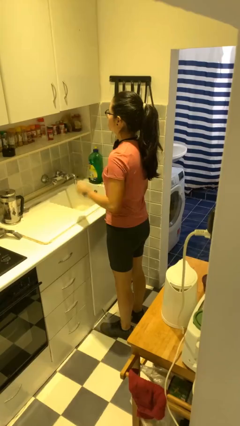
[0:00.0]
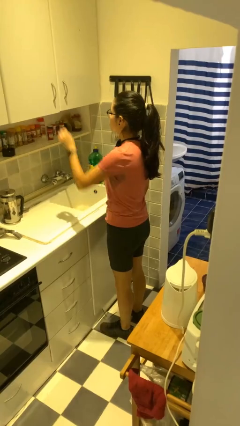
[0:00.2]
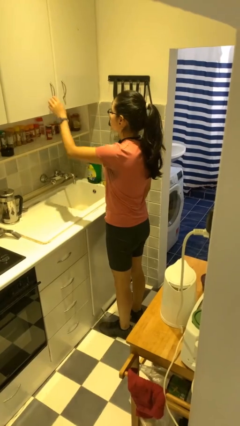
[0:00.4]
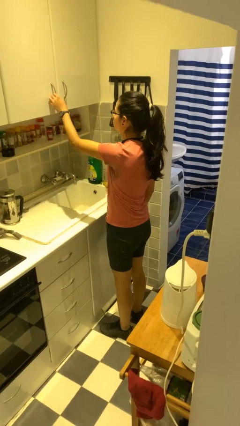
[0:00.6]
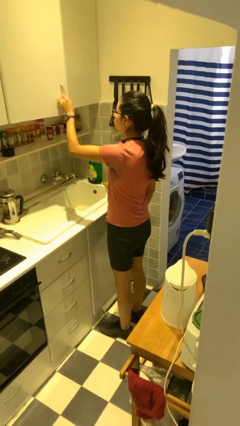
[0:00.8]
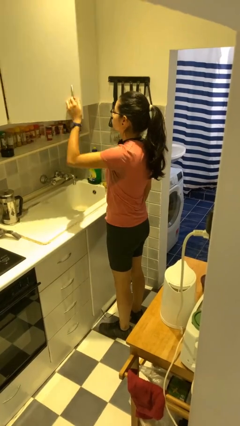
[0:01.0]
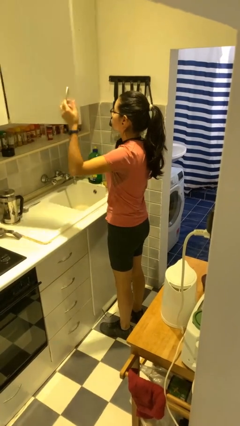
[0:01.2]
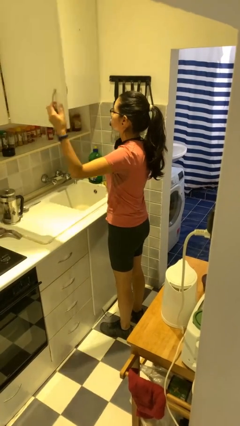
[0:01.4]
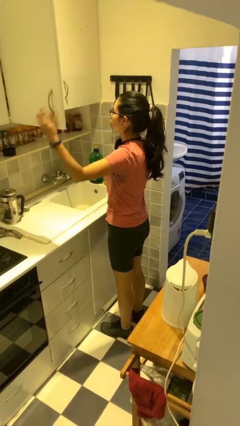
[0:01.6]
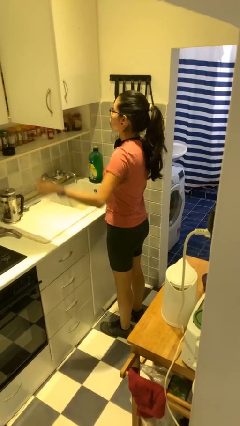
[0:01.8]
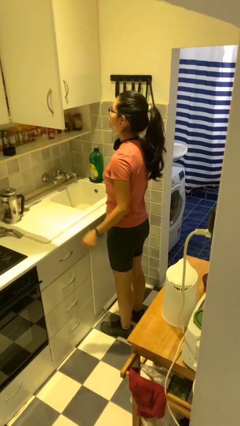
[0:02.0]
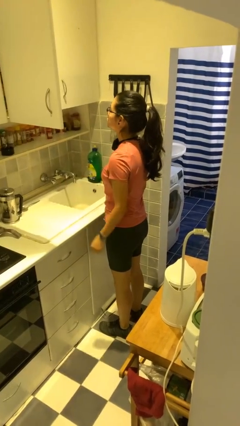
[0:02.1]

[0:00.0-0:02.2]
person opens cabinet

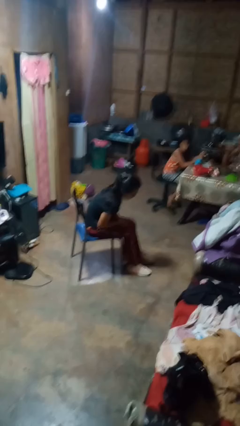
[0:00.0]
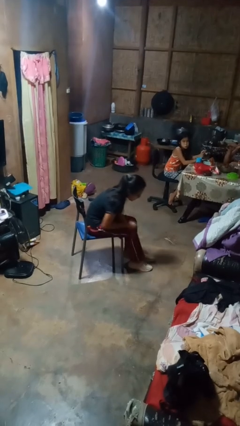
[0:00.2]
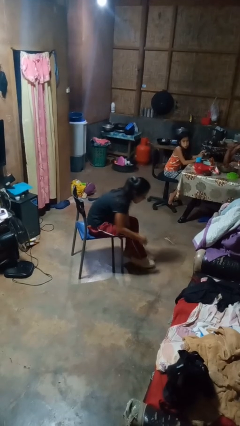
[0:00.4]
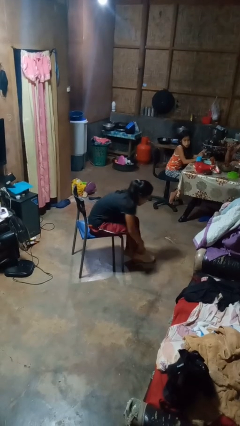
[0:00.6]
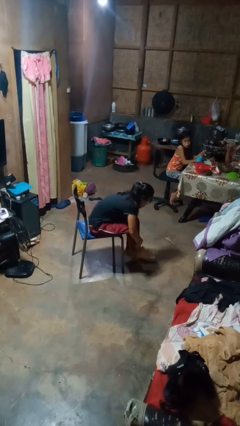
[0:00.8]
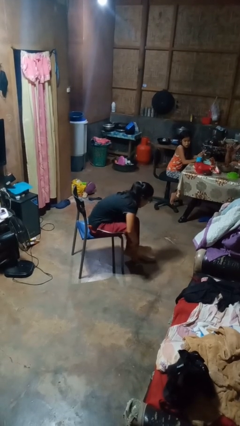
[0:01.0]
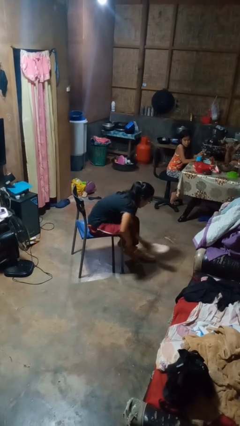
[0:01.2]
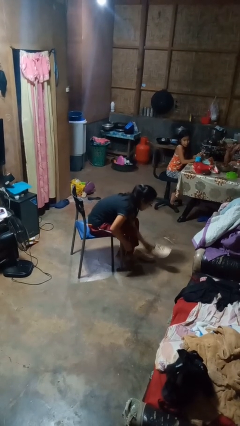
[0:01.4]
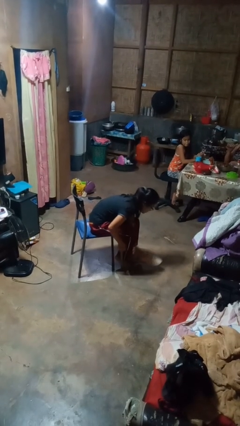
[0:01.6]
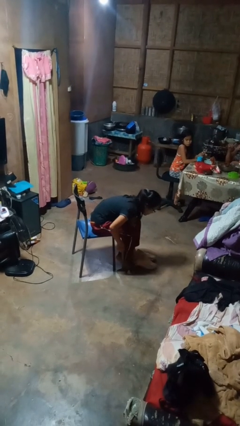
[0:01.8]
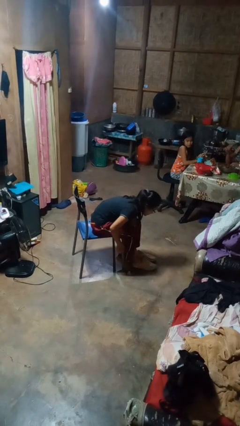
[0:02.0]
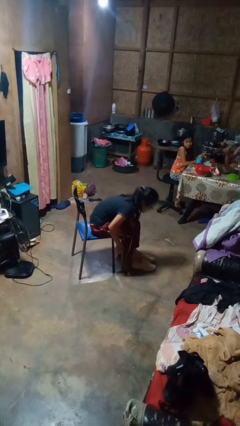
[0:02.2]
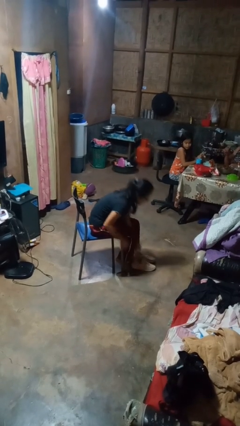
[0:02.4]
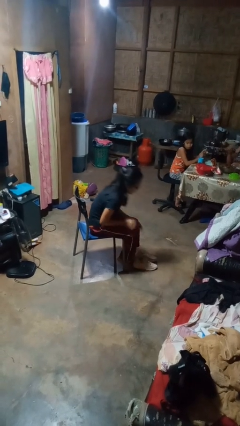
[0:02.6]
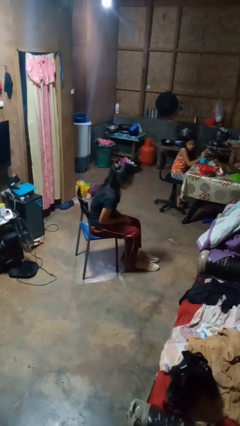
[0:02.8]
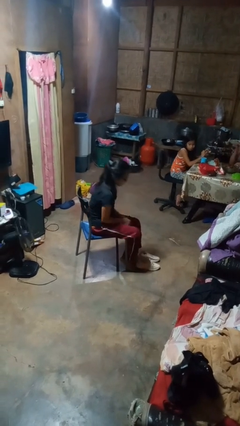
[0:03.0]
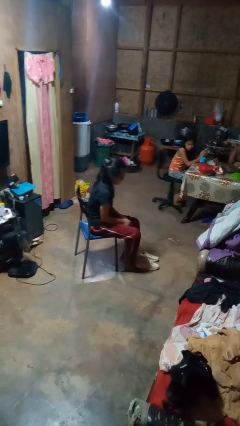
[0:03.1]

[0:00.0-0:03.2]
person takes off shoes

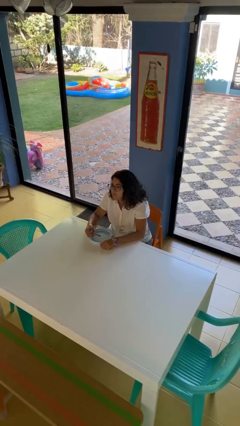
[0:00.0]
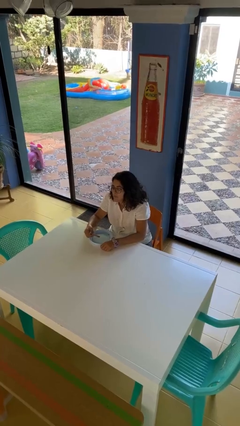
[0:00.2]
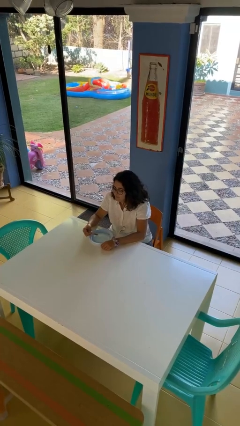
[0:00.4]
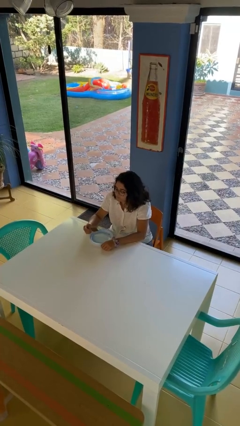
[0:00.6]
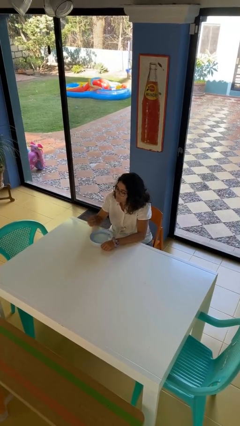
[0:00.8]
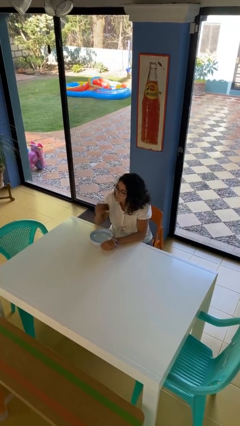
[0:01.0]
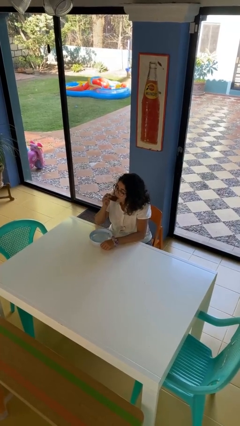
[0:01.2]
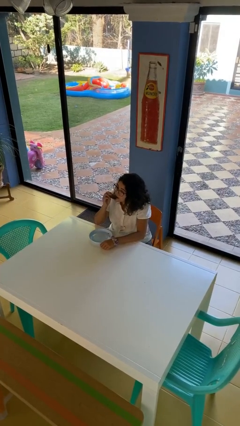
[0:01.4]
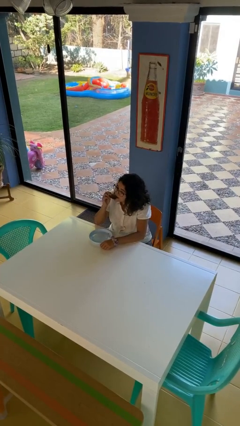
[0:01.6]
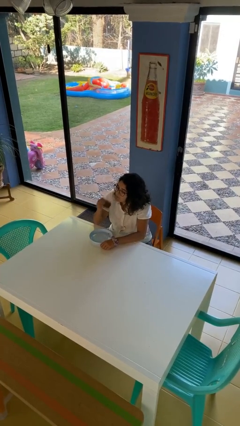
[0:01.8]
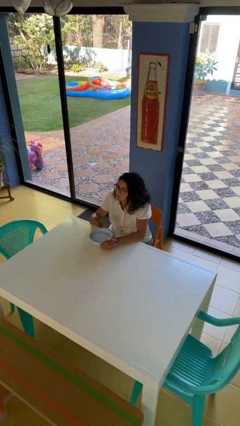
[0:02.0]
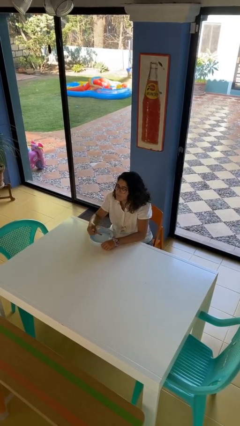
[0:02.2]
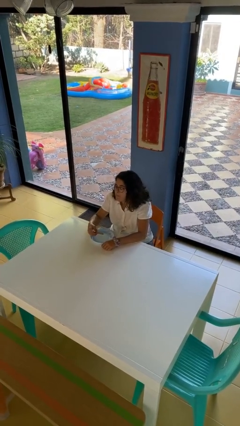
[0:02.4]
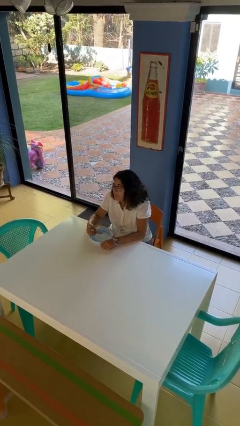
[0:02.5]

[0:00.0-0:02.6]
person eats with hands

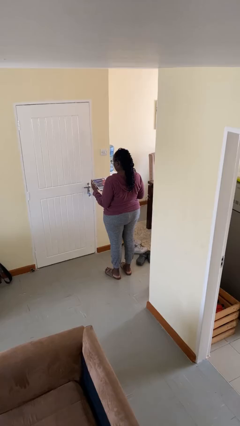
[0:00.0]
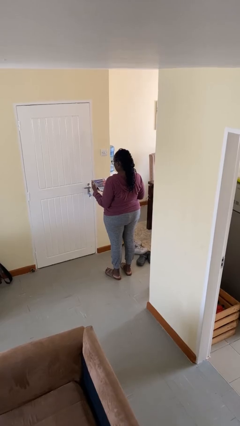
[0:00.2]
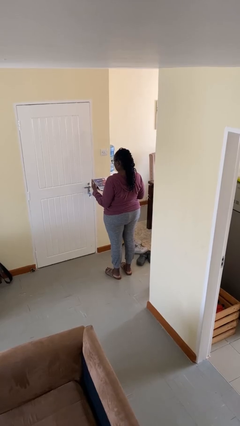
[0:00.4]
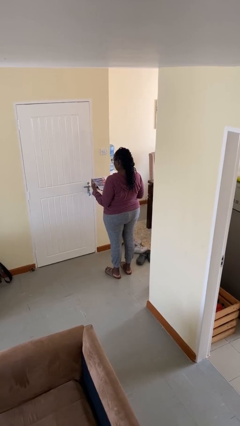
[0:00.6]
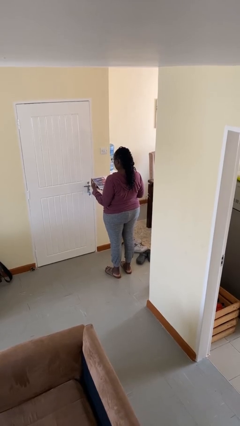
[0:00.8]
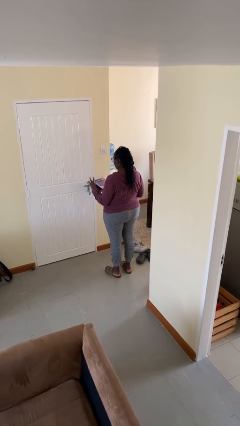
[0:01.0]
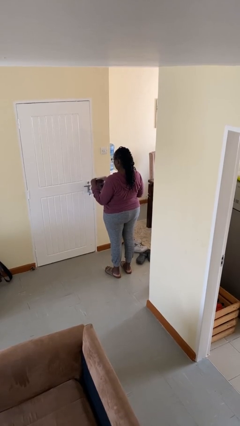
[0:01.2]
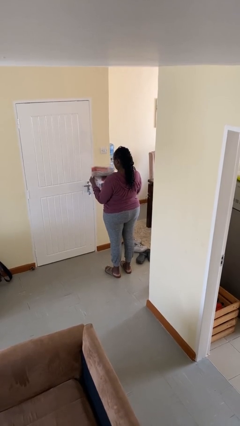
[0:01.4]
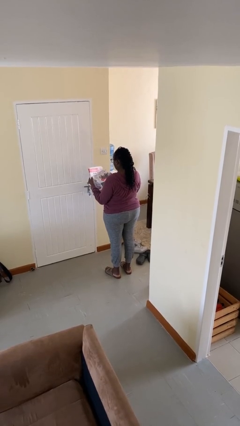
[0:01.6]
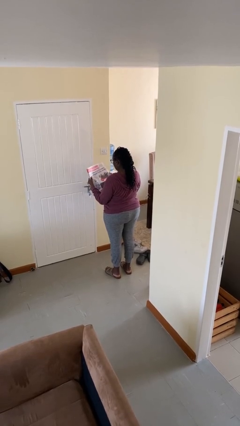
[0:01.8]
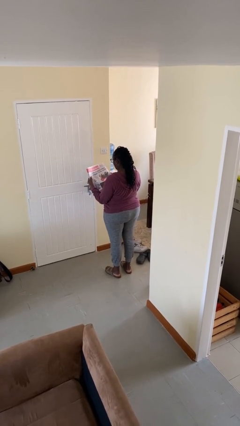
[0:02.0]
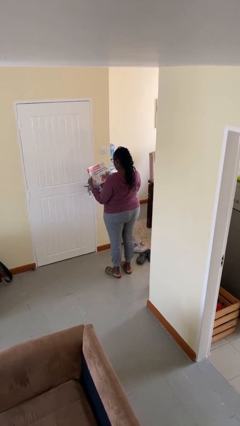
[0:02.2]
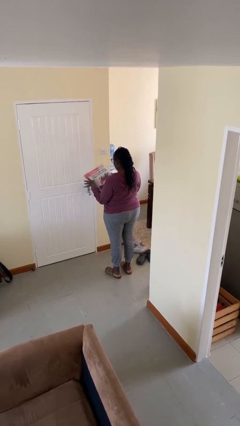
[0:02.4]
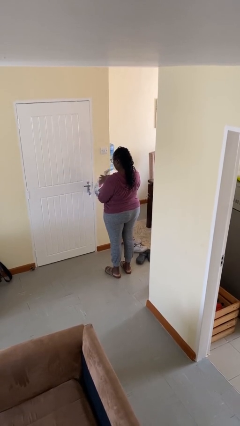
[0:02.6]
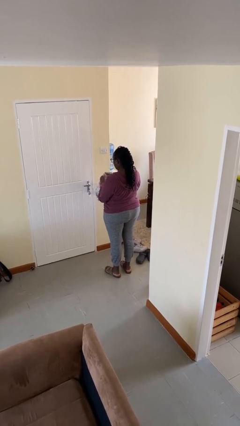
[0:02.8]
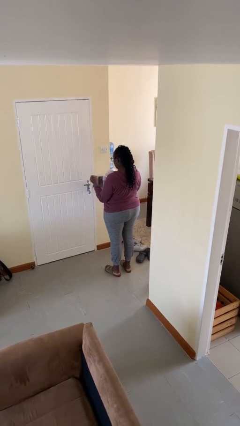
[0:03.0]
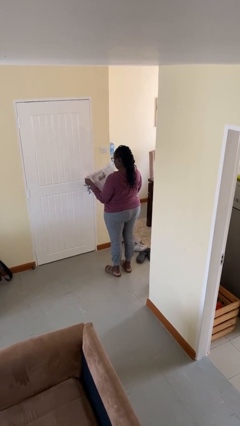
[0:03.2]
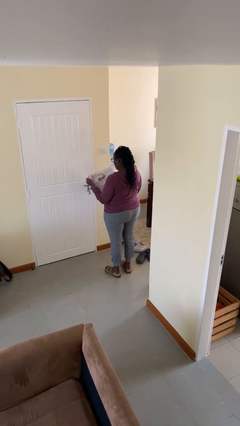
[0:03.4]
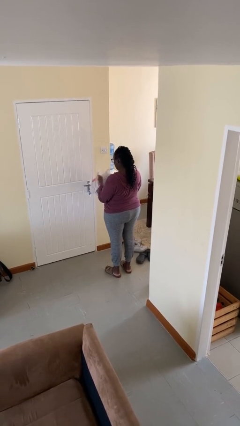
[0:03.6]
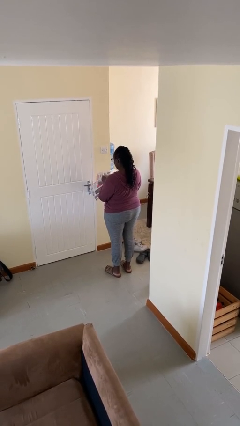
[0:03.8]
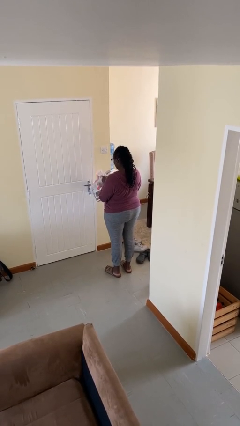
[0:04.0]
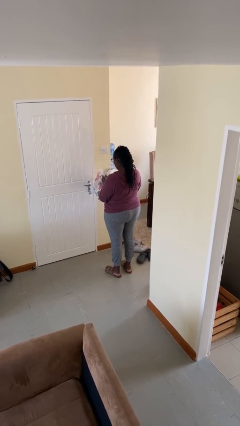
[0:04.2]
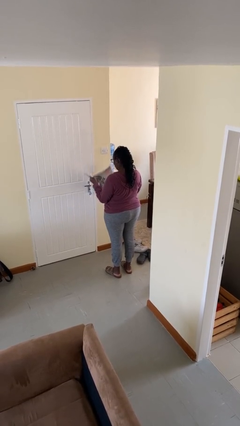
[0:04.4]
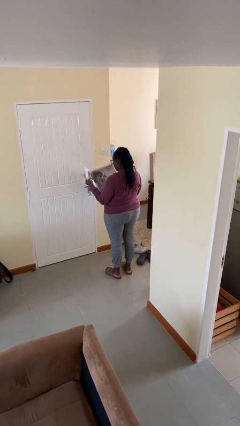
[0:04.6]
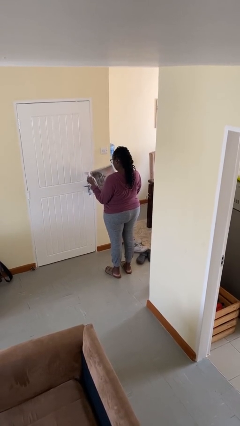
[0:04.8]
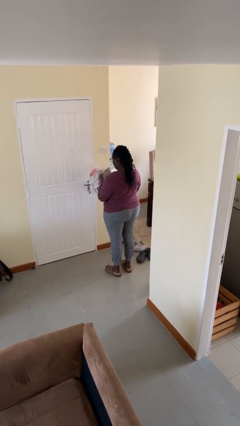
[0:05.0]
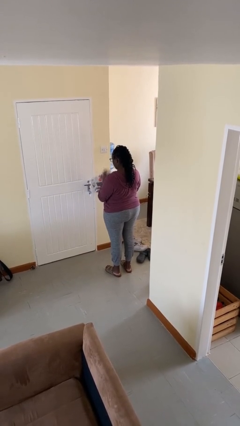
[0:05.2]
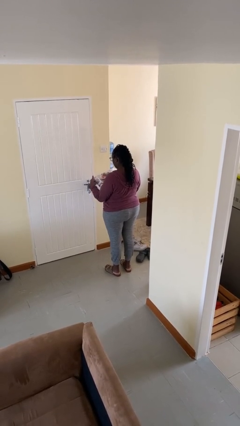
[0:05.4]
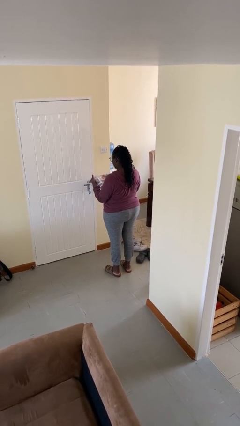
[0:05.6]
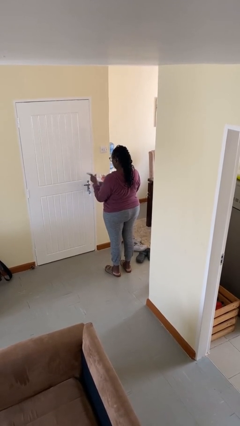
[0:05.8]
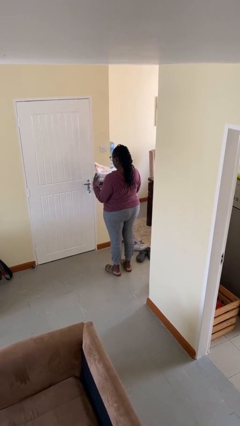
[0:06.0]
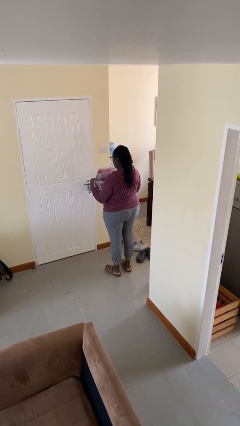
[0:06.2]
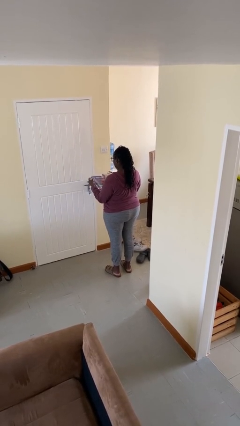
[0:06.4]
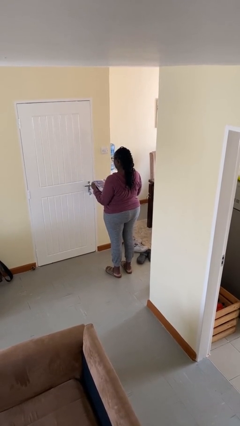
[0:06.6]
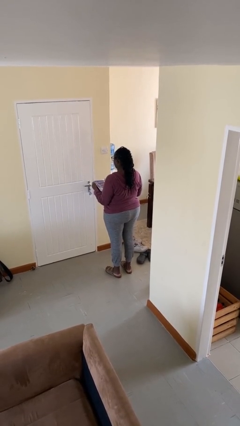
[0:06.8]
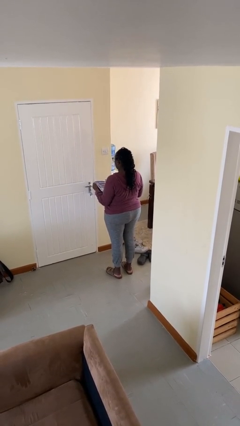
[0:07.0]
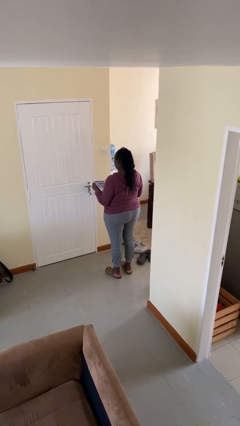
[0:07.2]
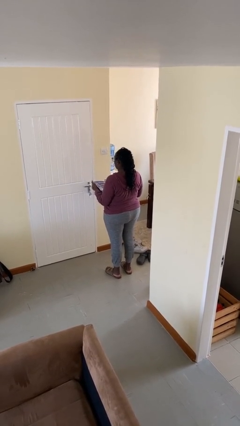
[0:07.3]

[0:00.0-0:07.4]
person reads newspaper

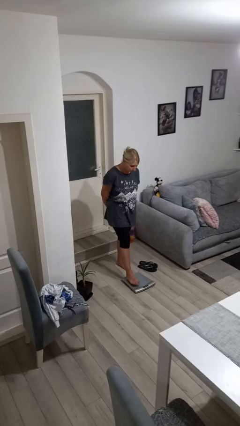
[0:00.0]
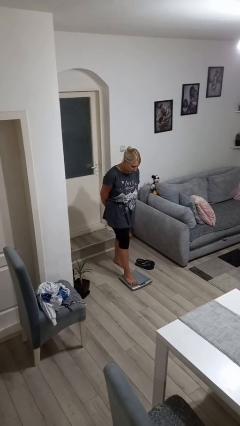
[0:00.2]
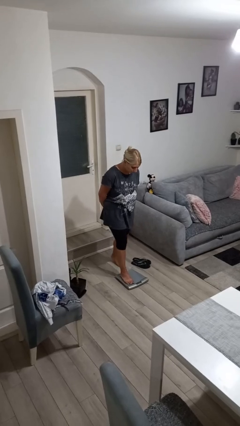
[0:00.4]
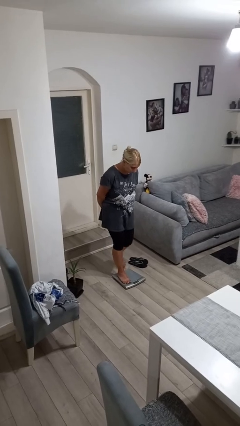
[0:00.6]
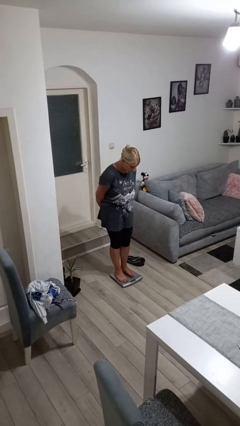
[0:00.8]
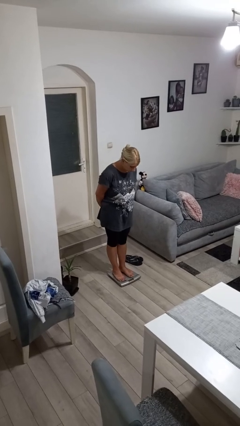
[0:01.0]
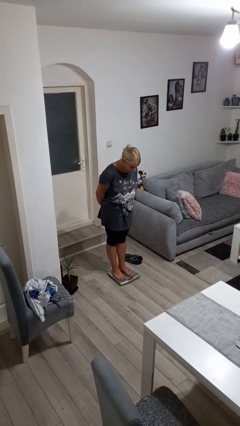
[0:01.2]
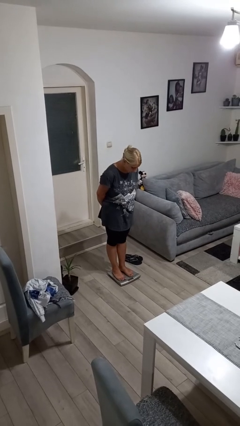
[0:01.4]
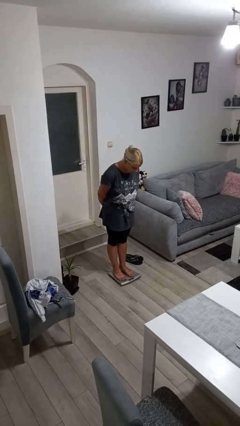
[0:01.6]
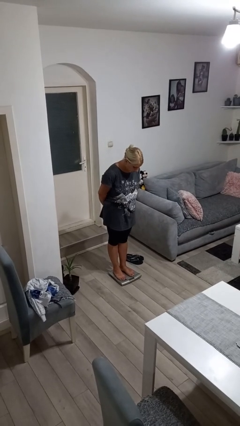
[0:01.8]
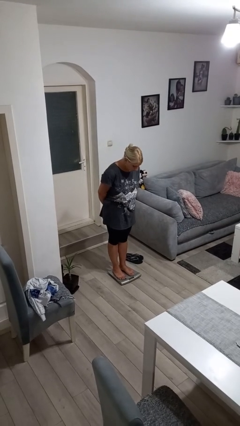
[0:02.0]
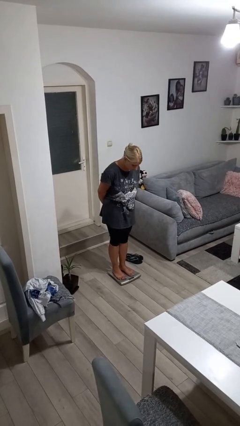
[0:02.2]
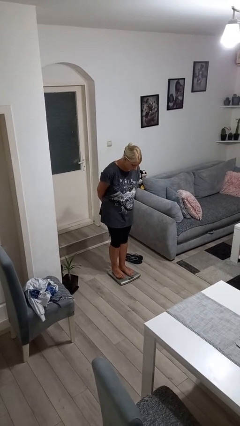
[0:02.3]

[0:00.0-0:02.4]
person uses bodyweight scale

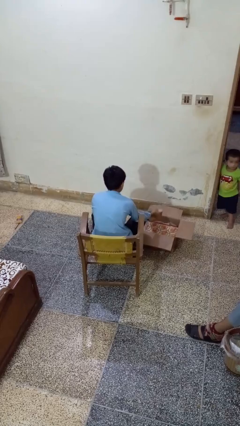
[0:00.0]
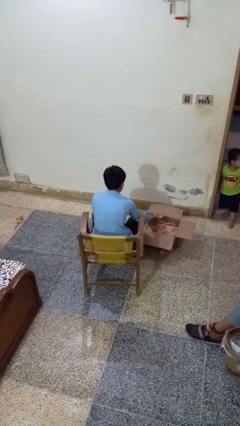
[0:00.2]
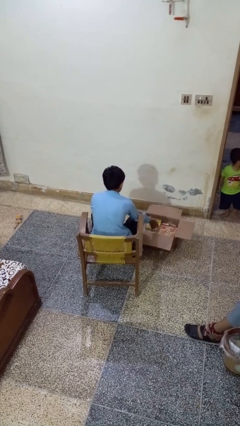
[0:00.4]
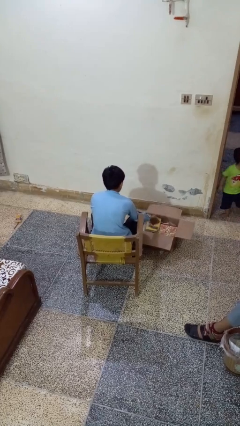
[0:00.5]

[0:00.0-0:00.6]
person puts object into box
